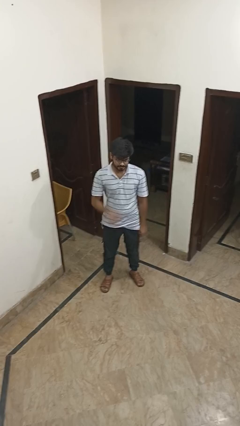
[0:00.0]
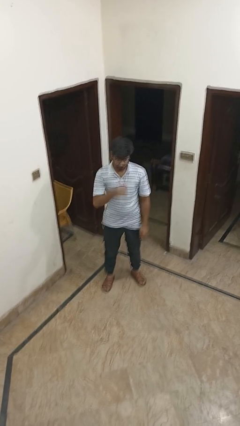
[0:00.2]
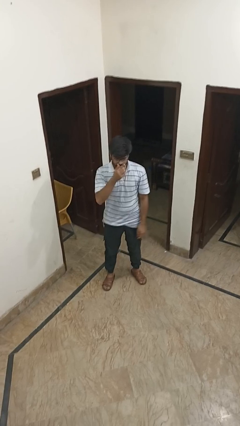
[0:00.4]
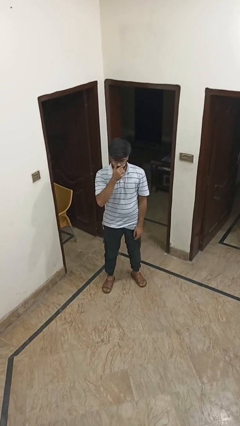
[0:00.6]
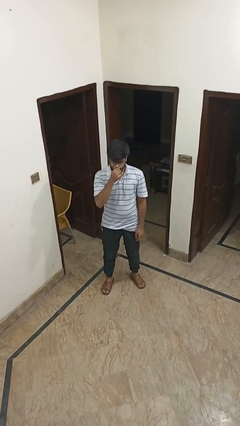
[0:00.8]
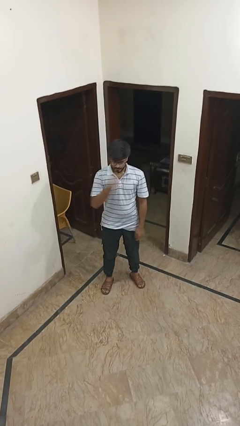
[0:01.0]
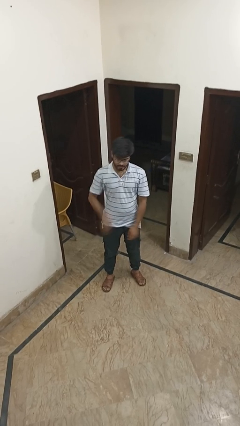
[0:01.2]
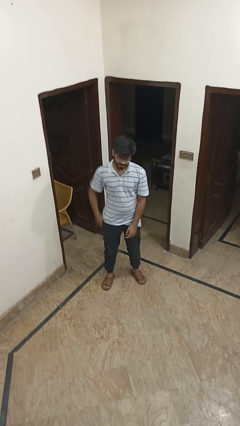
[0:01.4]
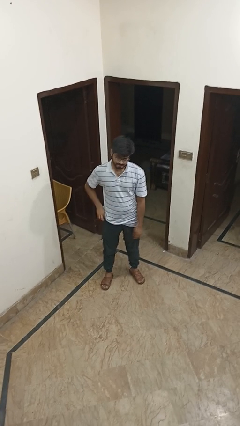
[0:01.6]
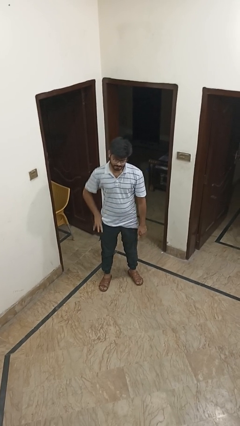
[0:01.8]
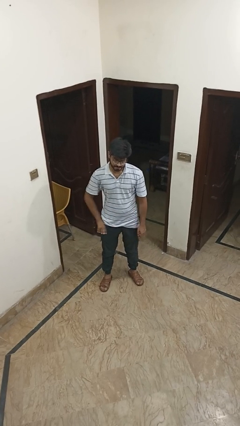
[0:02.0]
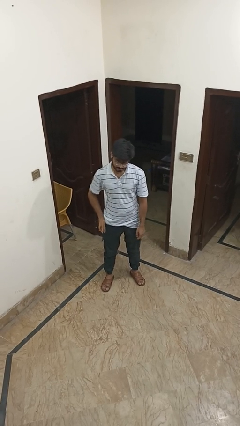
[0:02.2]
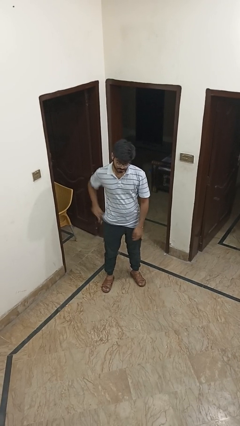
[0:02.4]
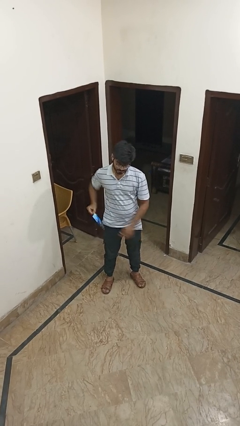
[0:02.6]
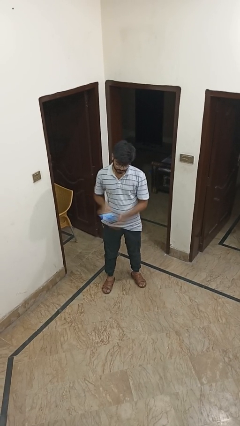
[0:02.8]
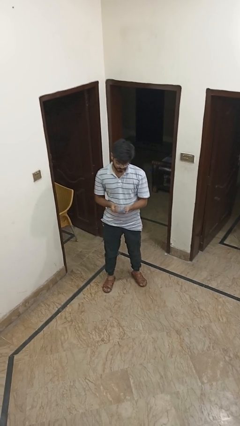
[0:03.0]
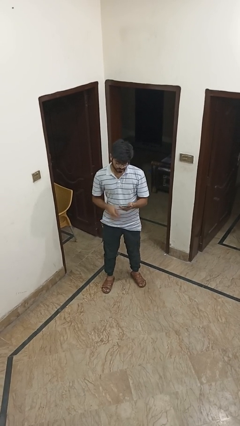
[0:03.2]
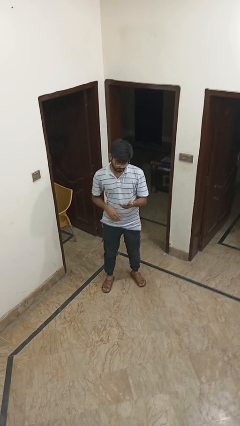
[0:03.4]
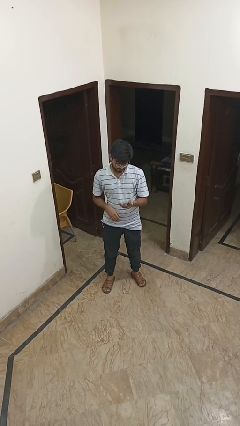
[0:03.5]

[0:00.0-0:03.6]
person takes phone from pocket

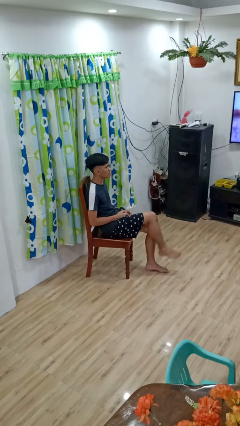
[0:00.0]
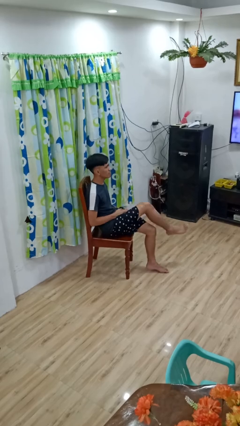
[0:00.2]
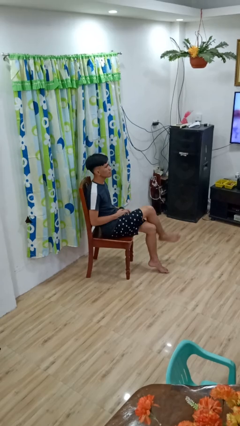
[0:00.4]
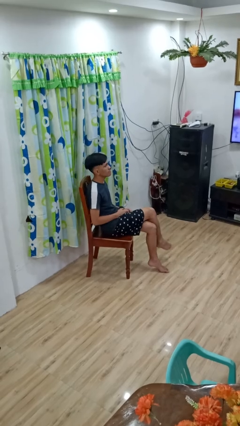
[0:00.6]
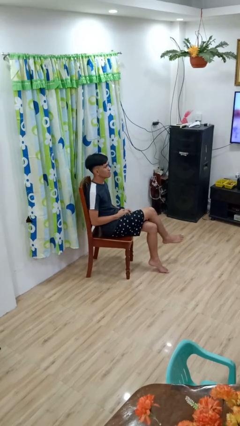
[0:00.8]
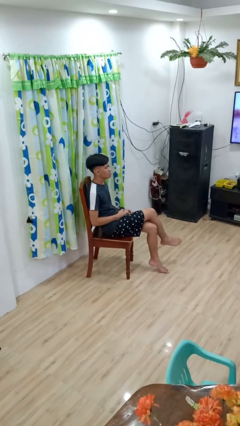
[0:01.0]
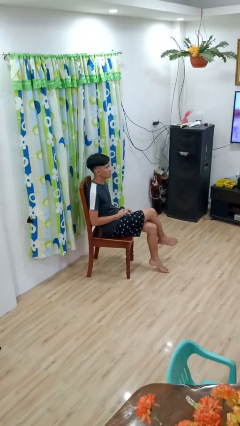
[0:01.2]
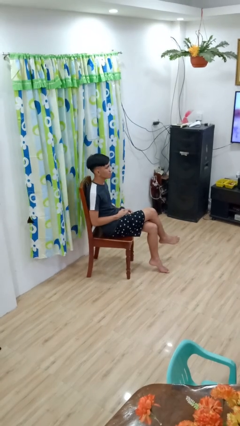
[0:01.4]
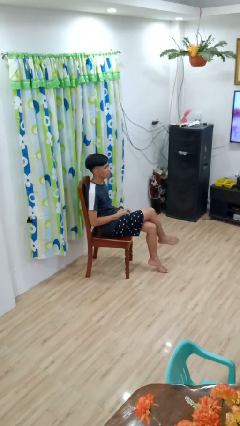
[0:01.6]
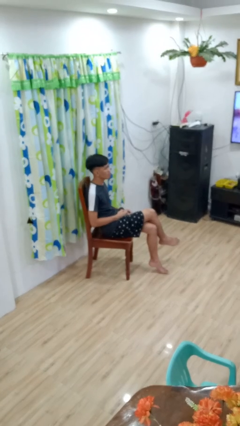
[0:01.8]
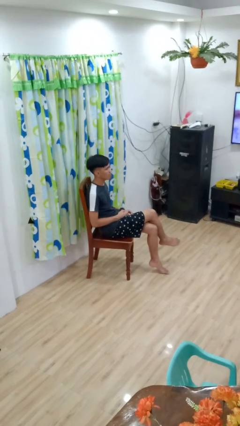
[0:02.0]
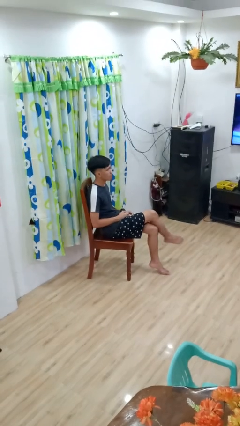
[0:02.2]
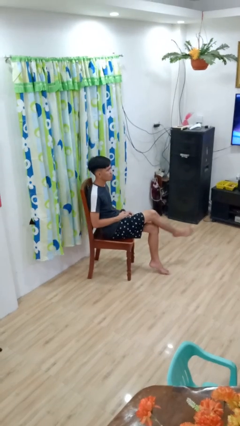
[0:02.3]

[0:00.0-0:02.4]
person crosses legs

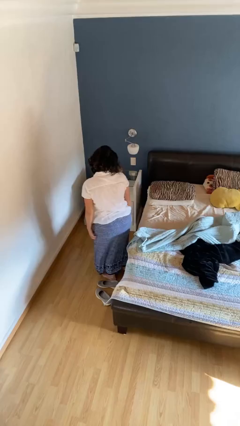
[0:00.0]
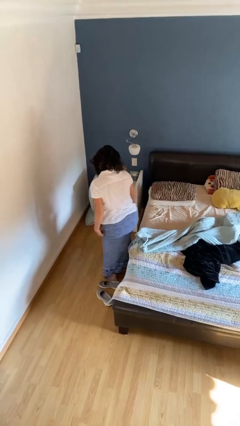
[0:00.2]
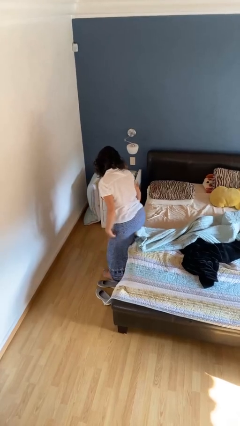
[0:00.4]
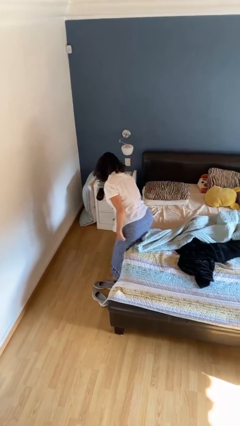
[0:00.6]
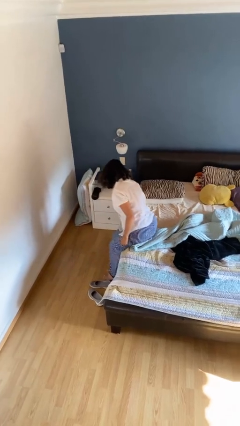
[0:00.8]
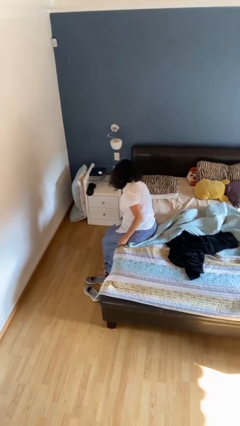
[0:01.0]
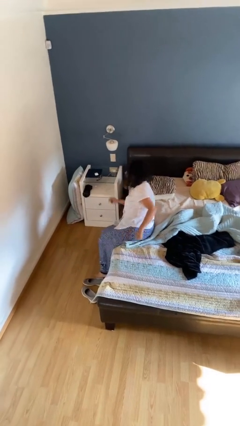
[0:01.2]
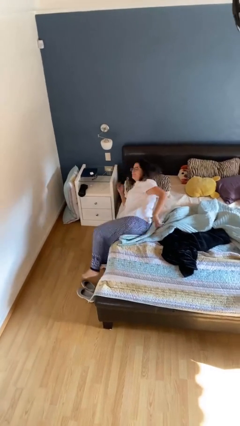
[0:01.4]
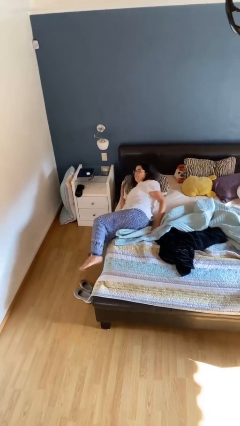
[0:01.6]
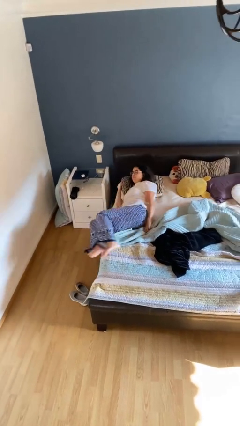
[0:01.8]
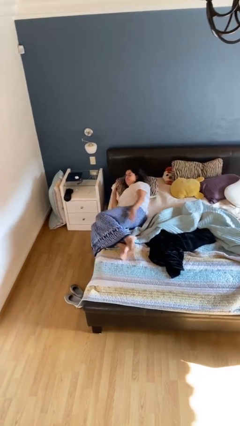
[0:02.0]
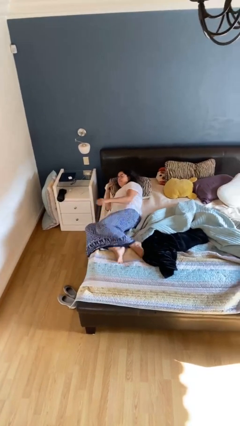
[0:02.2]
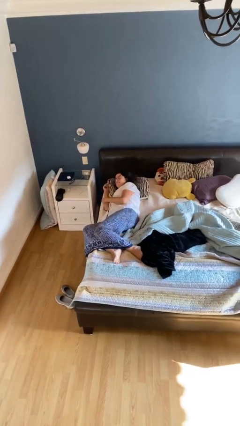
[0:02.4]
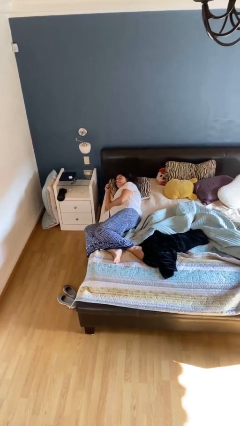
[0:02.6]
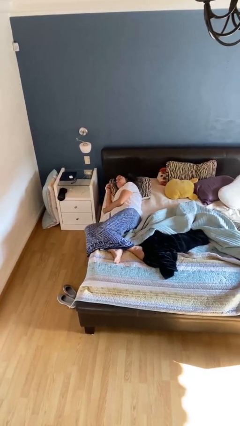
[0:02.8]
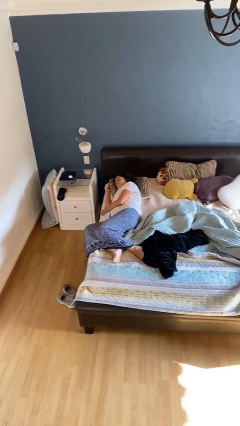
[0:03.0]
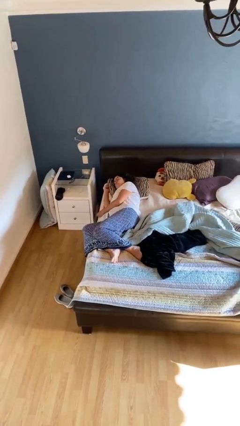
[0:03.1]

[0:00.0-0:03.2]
person lies down on bed

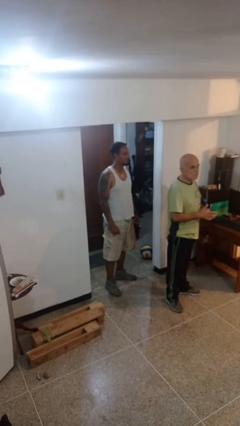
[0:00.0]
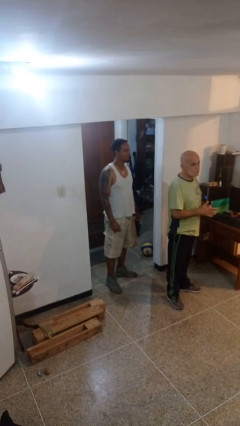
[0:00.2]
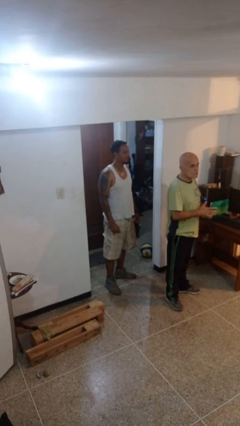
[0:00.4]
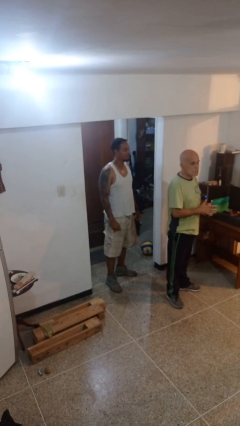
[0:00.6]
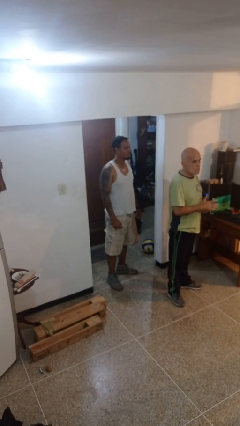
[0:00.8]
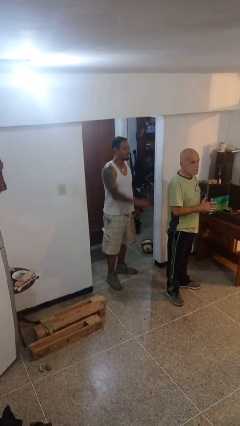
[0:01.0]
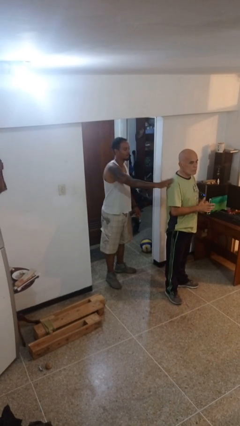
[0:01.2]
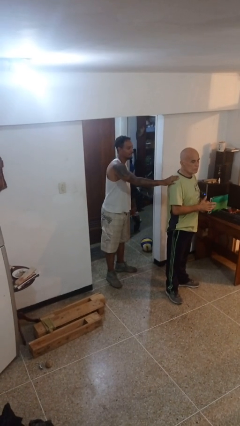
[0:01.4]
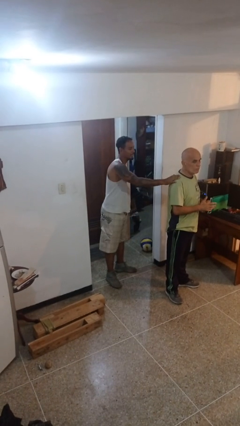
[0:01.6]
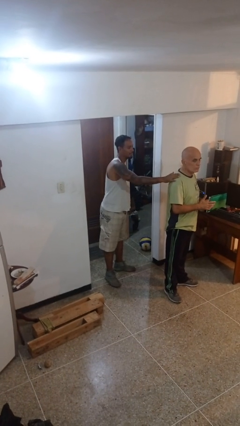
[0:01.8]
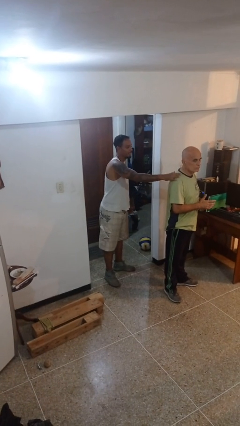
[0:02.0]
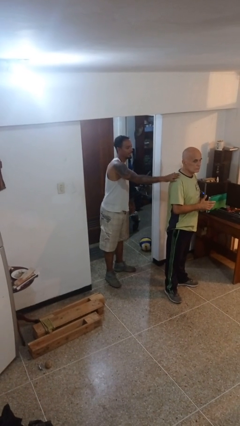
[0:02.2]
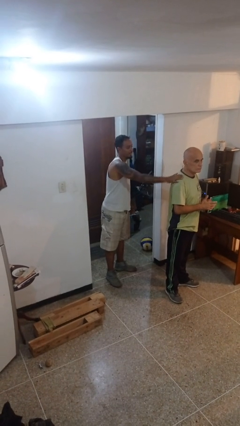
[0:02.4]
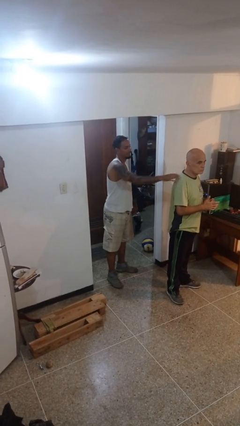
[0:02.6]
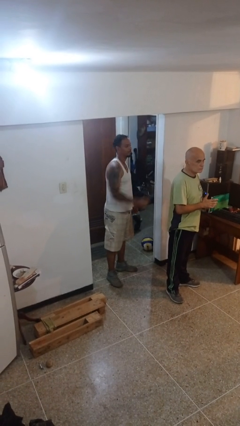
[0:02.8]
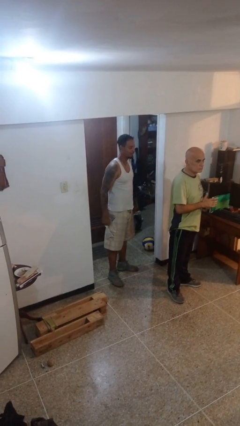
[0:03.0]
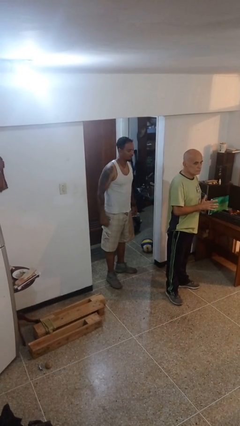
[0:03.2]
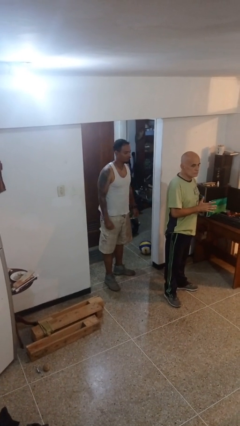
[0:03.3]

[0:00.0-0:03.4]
person touches back of person

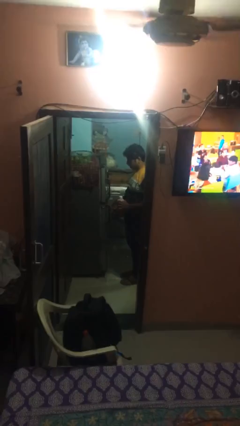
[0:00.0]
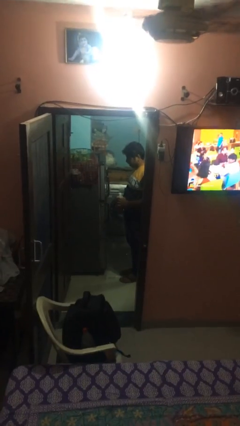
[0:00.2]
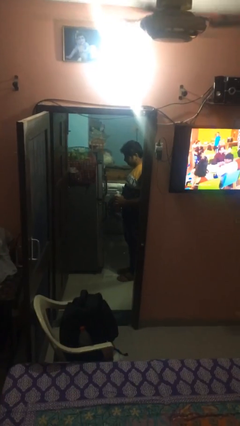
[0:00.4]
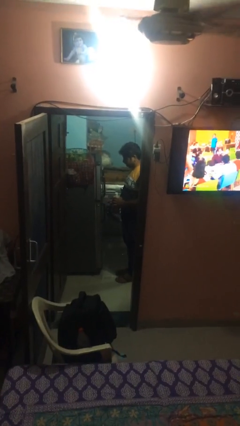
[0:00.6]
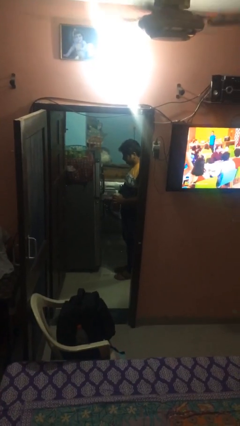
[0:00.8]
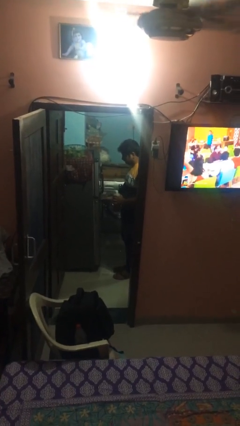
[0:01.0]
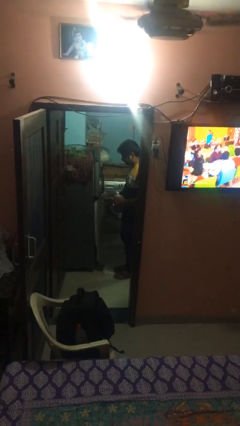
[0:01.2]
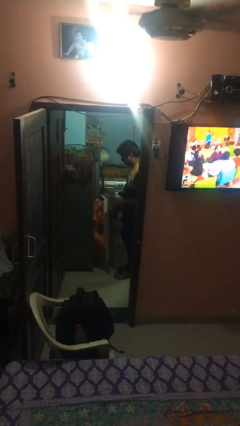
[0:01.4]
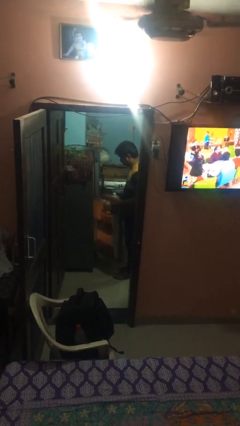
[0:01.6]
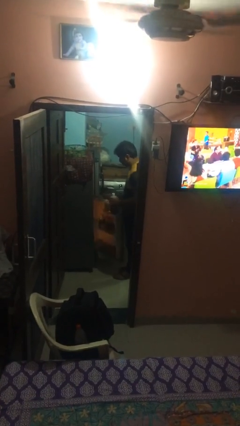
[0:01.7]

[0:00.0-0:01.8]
person opens refrigerator

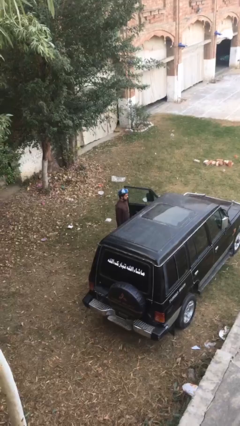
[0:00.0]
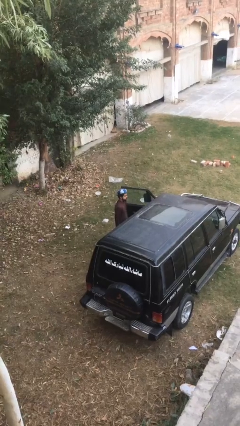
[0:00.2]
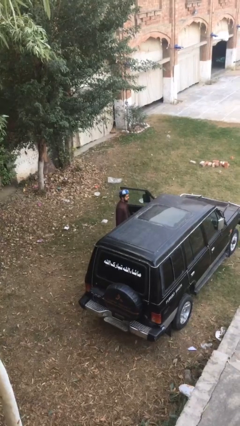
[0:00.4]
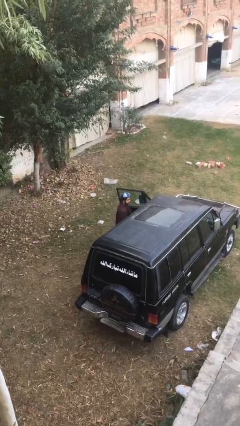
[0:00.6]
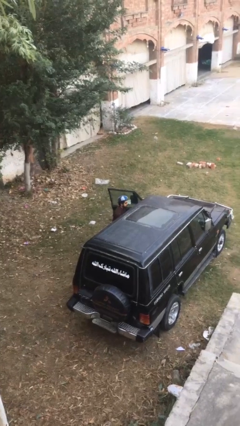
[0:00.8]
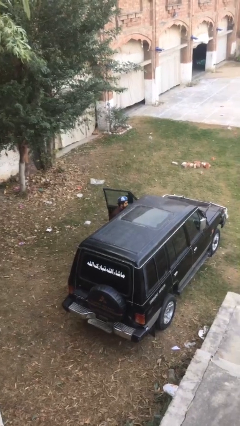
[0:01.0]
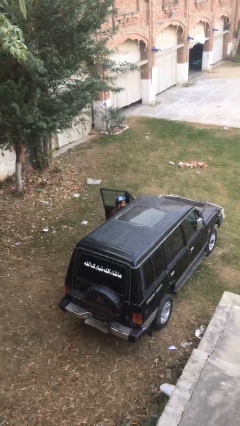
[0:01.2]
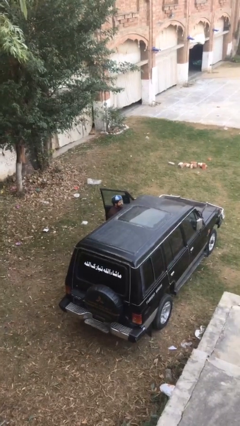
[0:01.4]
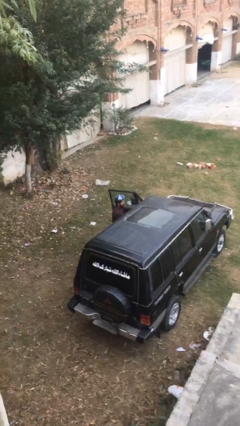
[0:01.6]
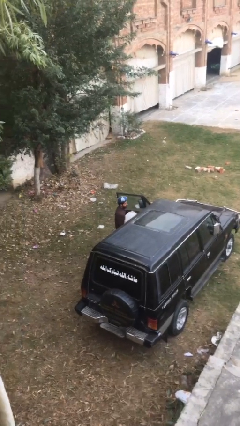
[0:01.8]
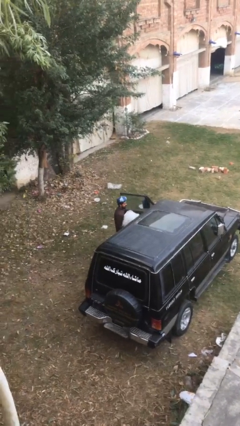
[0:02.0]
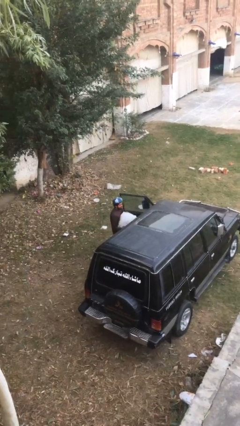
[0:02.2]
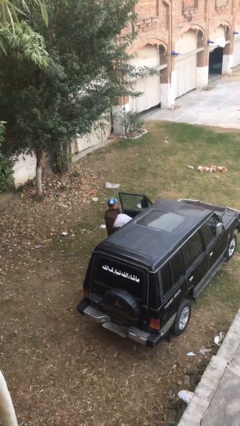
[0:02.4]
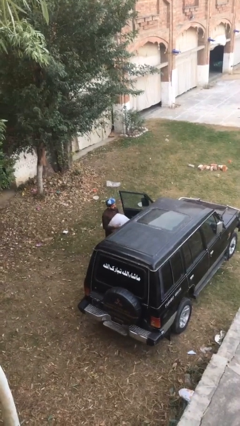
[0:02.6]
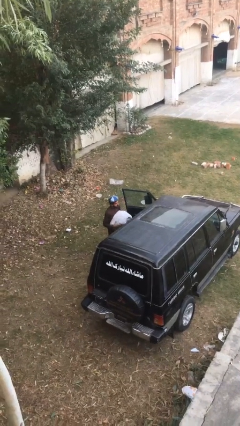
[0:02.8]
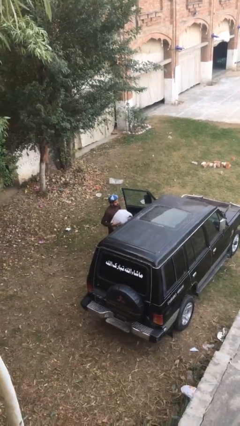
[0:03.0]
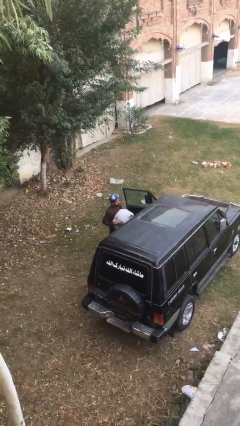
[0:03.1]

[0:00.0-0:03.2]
person unloads car
